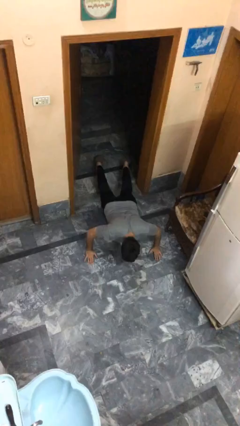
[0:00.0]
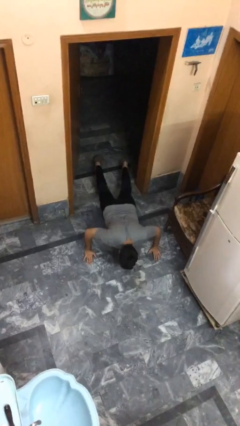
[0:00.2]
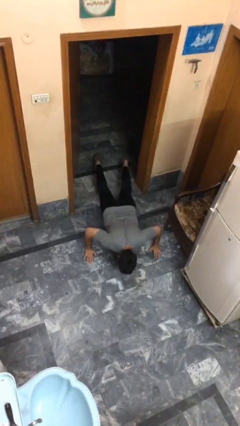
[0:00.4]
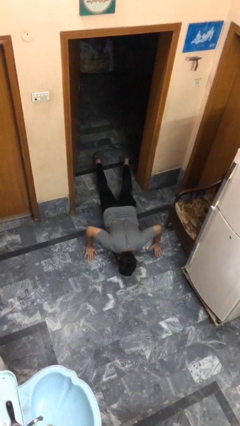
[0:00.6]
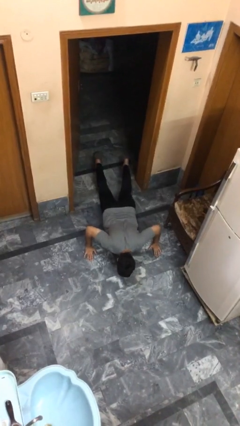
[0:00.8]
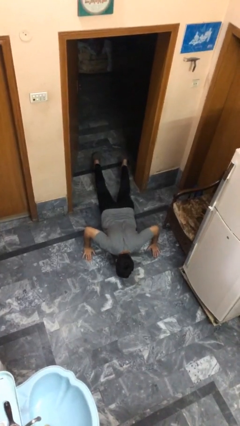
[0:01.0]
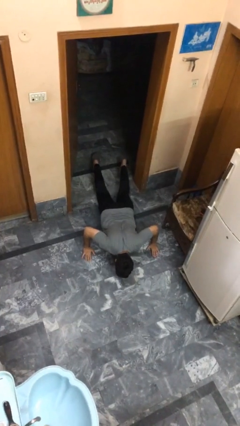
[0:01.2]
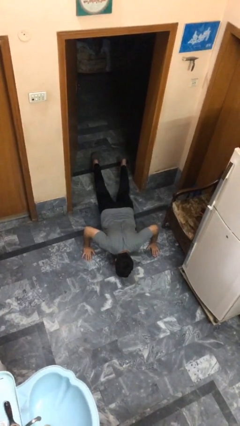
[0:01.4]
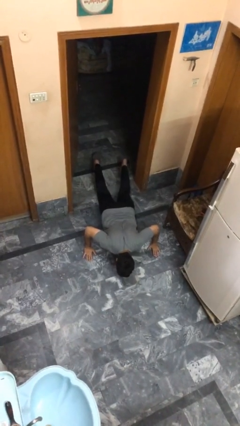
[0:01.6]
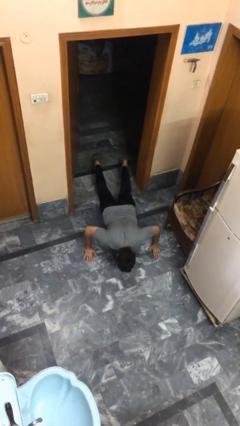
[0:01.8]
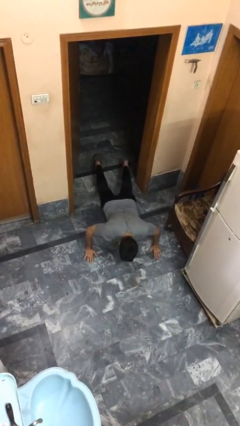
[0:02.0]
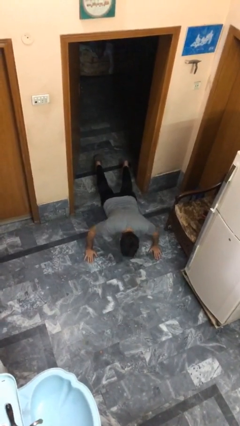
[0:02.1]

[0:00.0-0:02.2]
person exercises with pushup

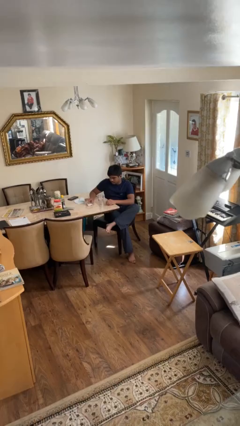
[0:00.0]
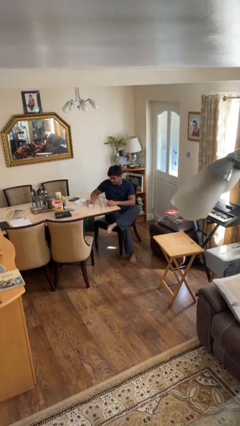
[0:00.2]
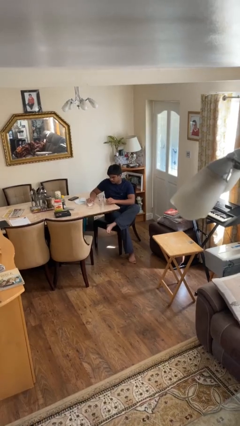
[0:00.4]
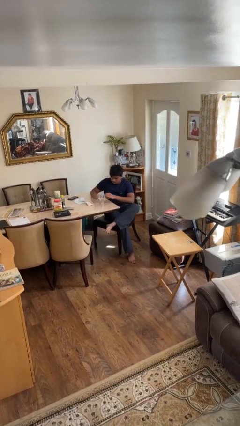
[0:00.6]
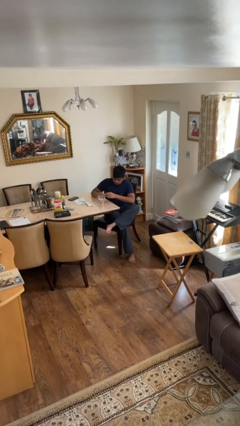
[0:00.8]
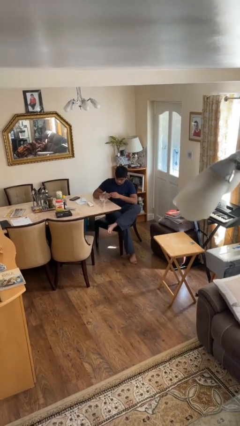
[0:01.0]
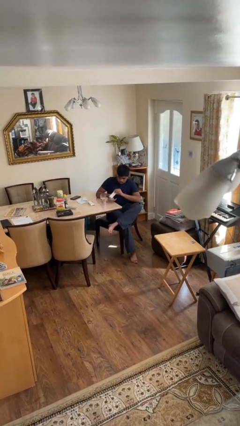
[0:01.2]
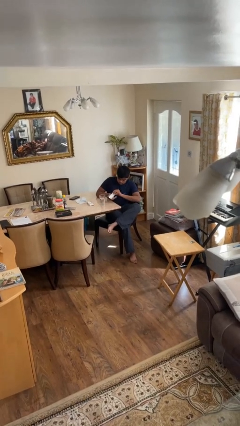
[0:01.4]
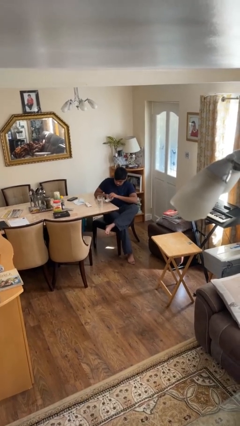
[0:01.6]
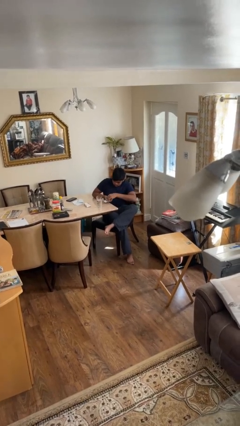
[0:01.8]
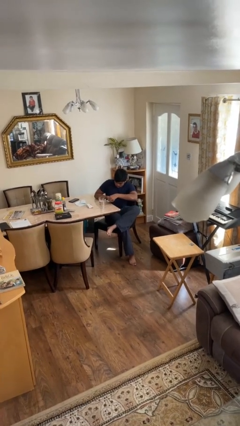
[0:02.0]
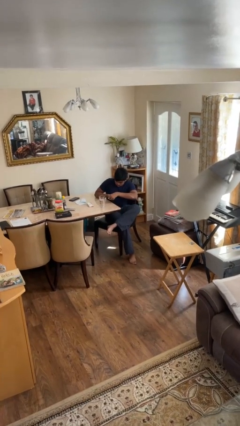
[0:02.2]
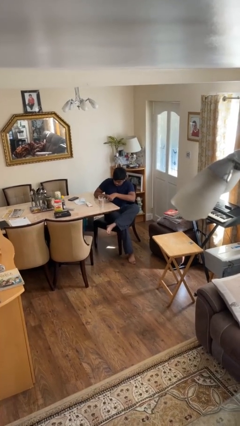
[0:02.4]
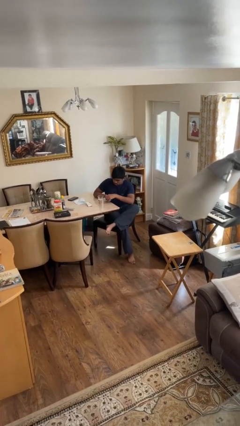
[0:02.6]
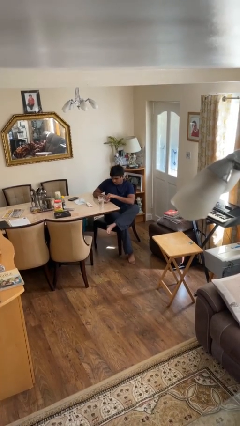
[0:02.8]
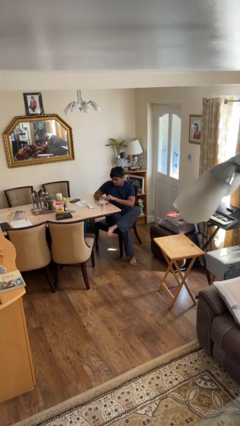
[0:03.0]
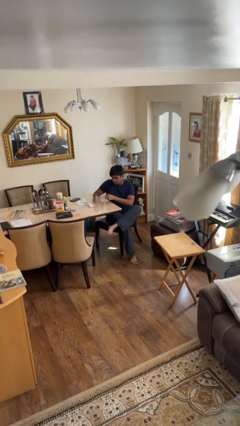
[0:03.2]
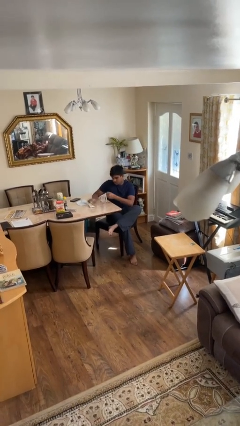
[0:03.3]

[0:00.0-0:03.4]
person takes medicine pills

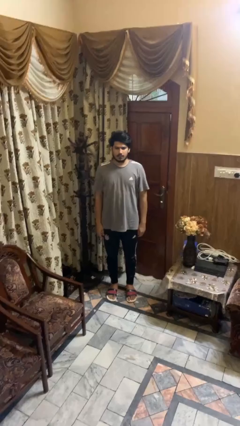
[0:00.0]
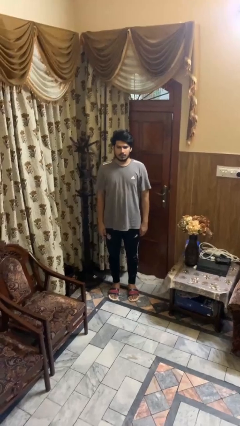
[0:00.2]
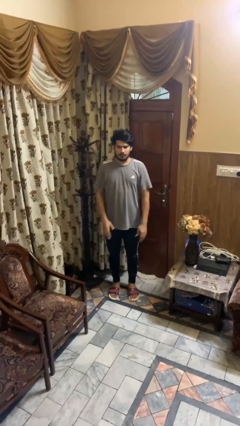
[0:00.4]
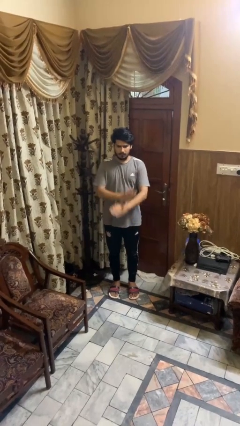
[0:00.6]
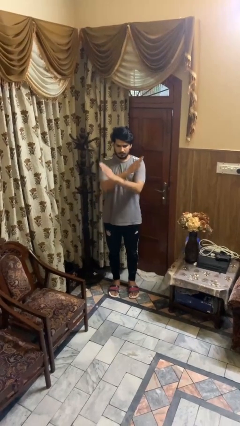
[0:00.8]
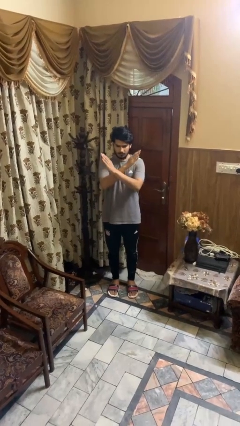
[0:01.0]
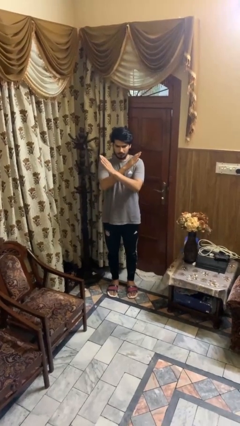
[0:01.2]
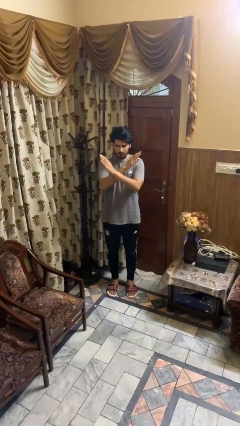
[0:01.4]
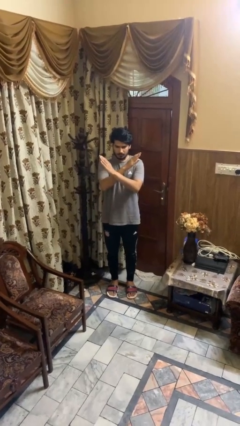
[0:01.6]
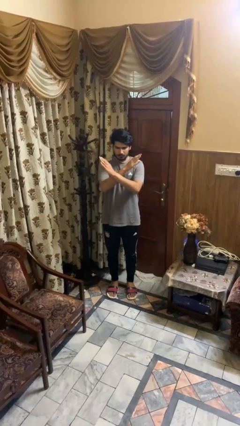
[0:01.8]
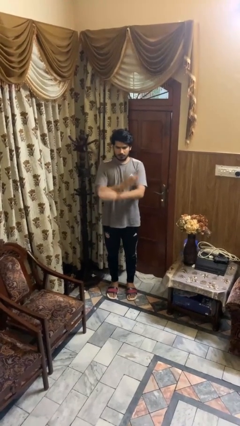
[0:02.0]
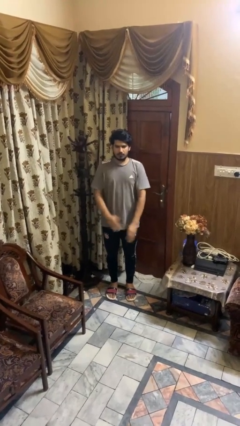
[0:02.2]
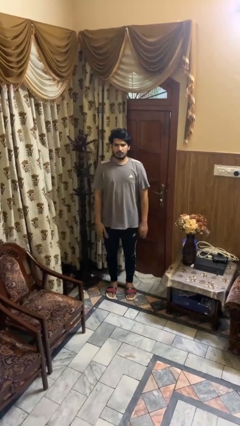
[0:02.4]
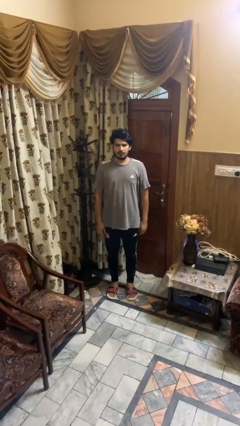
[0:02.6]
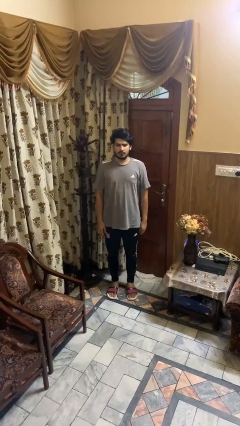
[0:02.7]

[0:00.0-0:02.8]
person gestures arms x

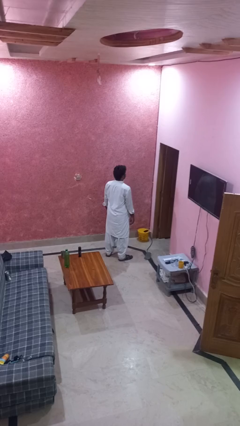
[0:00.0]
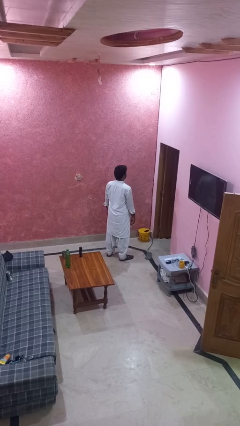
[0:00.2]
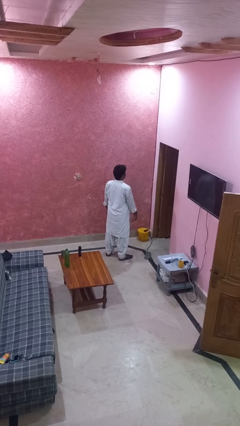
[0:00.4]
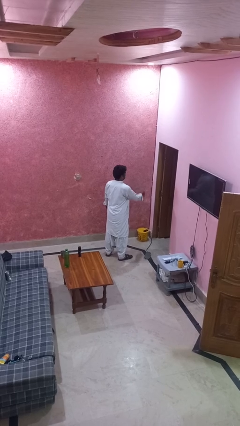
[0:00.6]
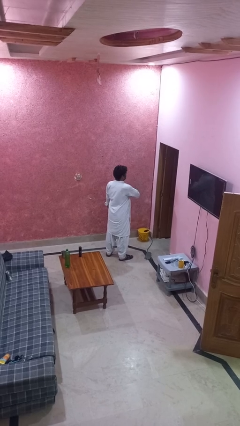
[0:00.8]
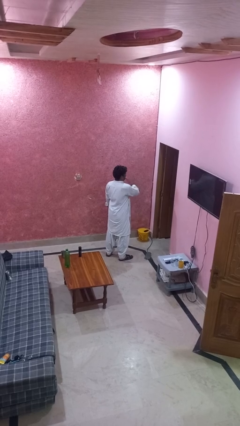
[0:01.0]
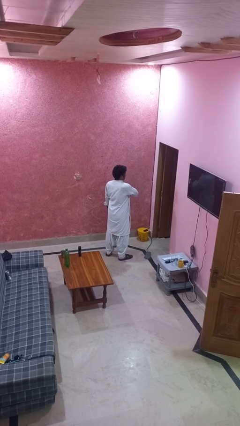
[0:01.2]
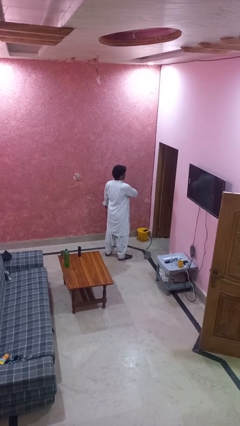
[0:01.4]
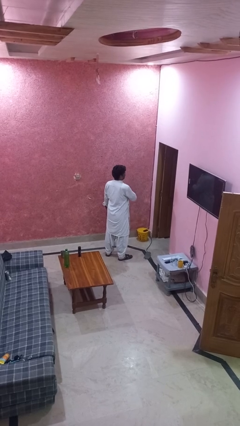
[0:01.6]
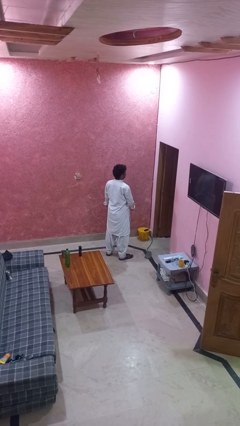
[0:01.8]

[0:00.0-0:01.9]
person drums on chest

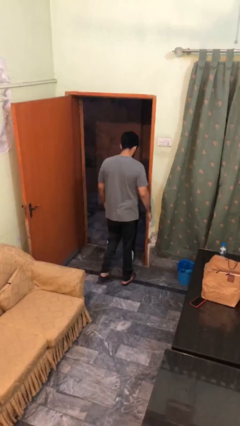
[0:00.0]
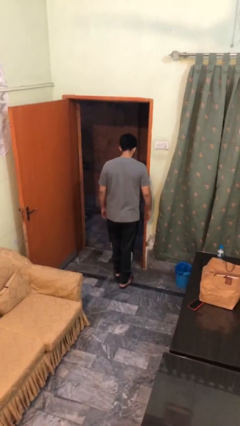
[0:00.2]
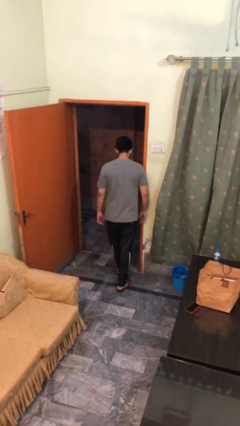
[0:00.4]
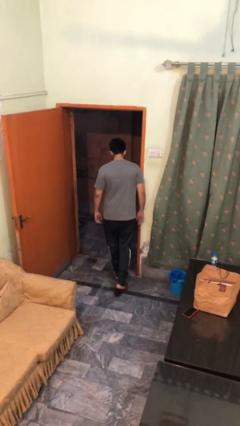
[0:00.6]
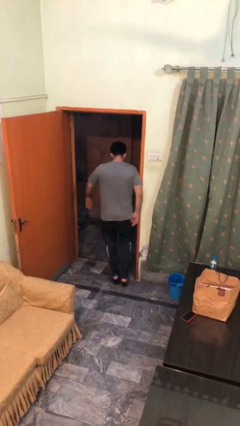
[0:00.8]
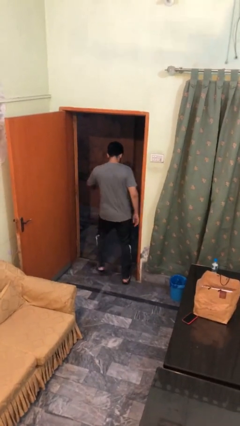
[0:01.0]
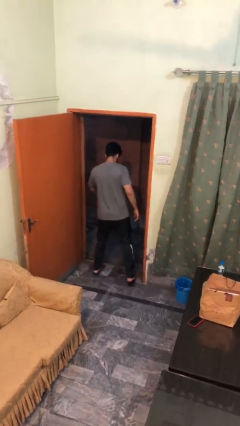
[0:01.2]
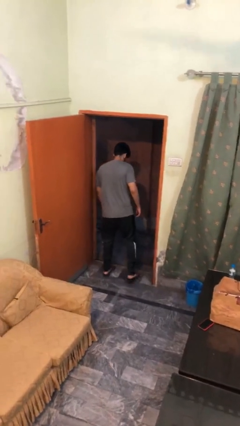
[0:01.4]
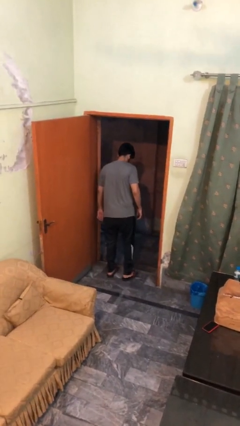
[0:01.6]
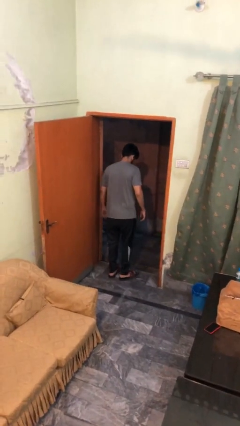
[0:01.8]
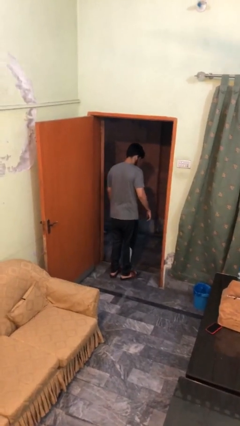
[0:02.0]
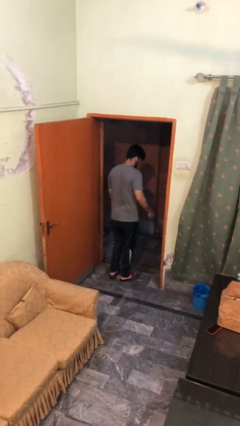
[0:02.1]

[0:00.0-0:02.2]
person bumps into wall

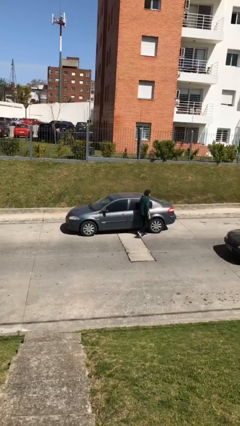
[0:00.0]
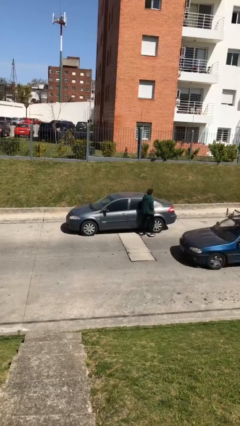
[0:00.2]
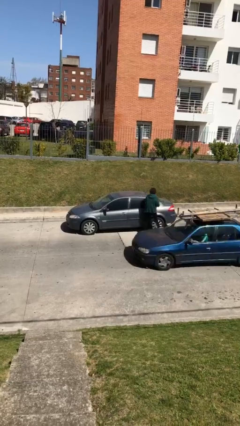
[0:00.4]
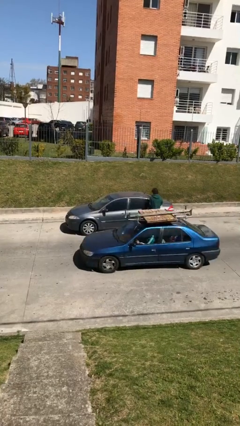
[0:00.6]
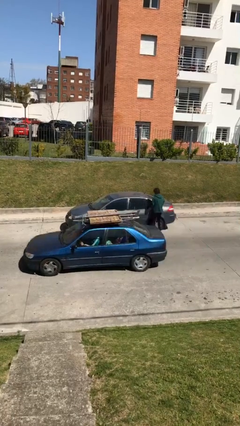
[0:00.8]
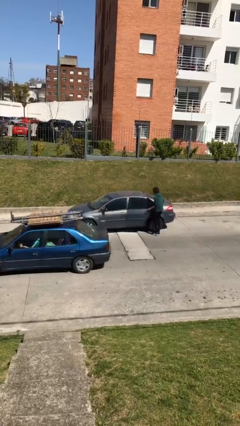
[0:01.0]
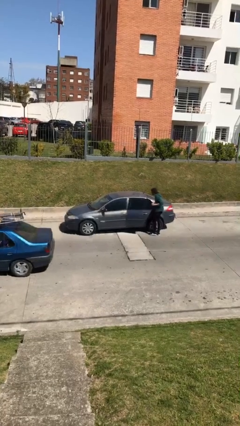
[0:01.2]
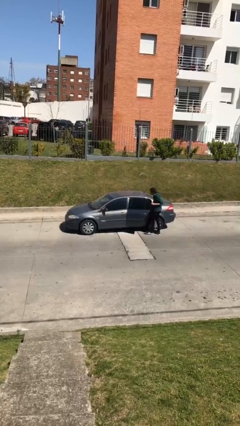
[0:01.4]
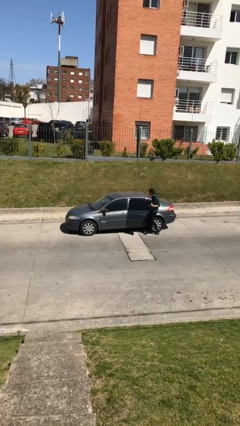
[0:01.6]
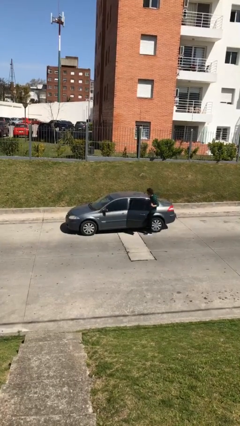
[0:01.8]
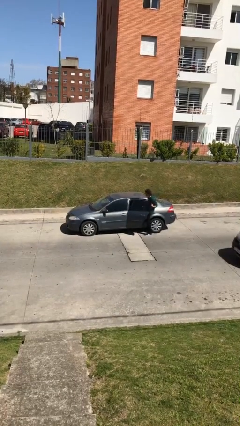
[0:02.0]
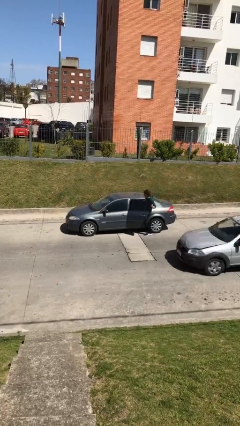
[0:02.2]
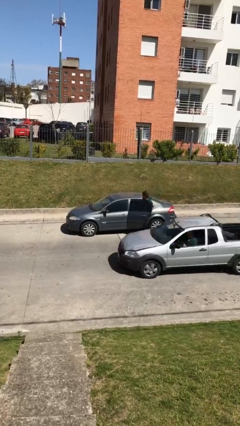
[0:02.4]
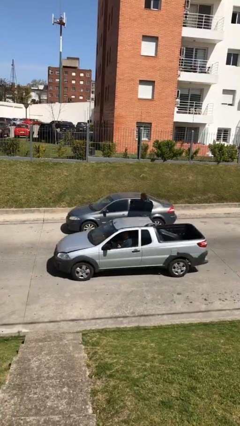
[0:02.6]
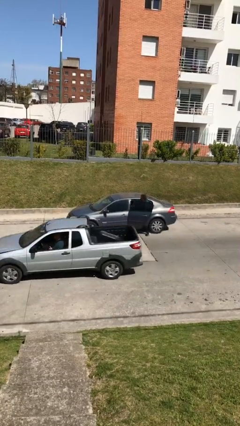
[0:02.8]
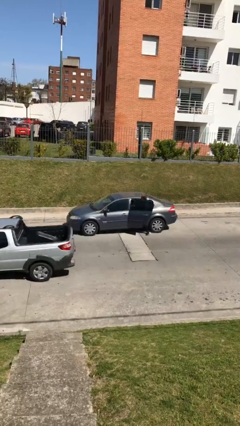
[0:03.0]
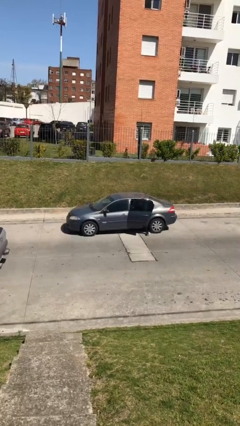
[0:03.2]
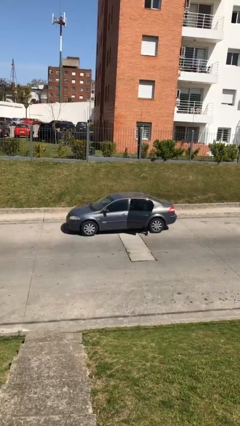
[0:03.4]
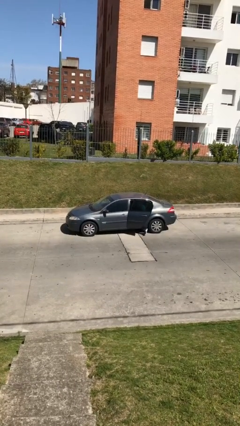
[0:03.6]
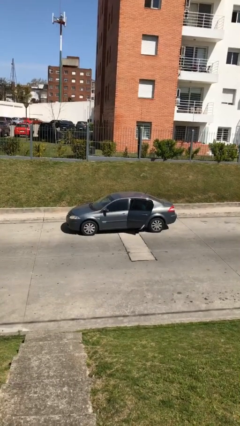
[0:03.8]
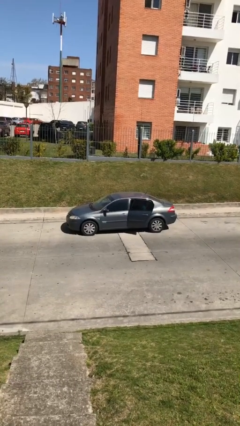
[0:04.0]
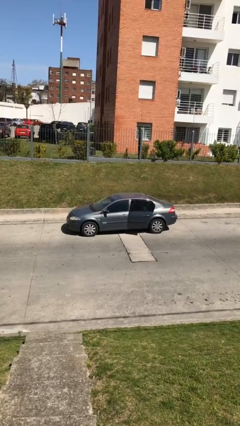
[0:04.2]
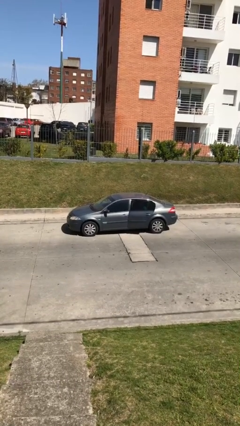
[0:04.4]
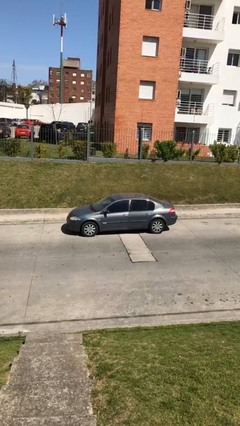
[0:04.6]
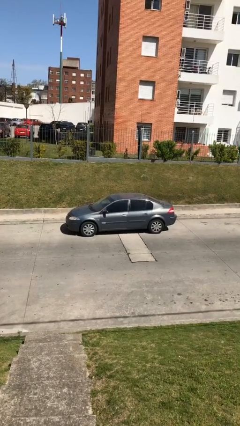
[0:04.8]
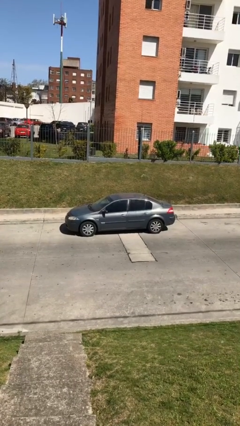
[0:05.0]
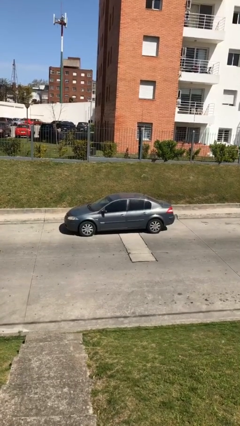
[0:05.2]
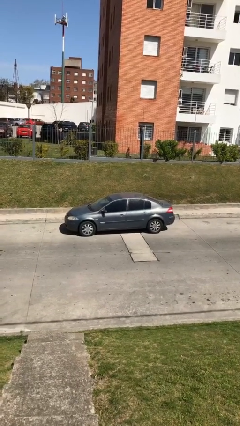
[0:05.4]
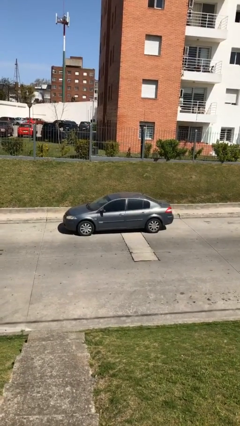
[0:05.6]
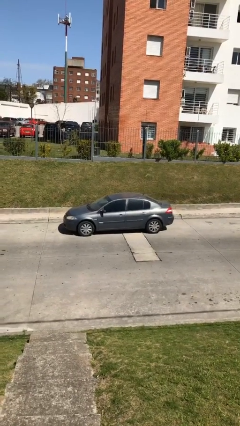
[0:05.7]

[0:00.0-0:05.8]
car picks up person
